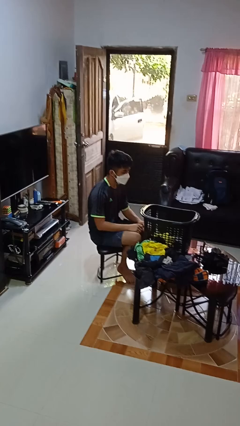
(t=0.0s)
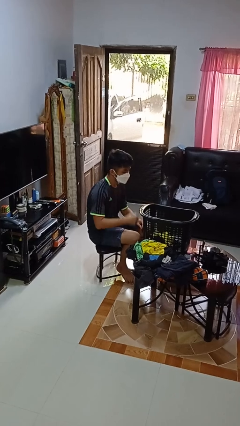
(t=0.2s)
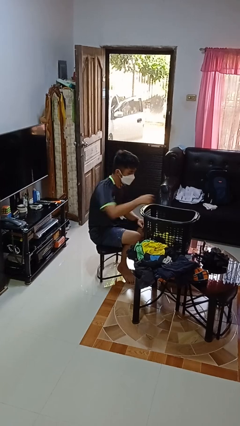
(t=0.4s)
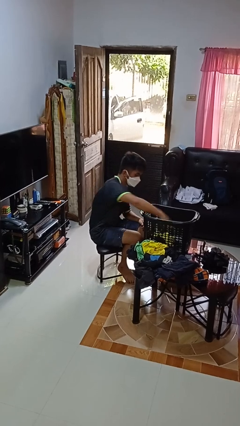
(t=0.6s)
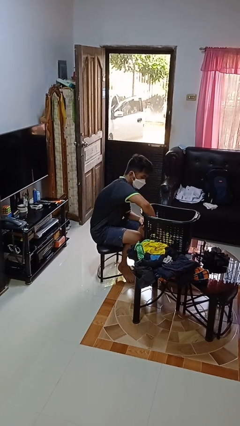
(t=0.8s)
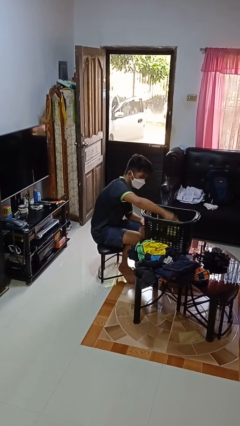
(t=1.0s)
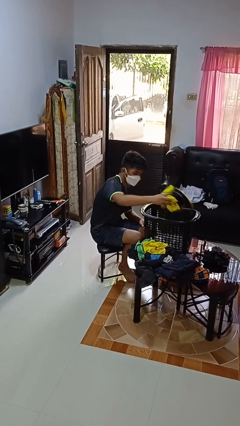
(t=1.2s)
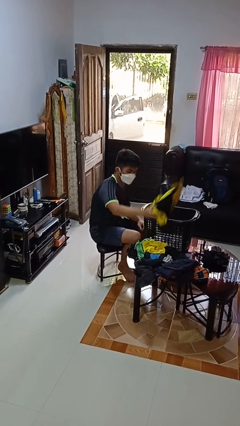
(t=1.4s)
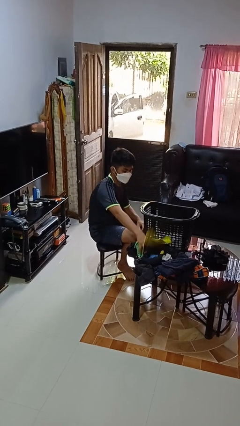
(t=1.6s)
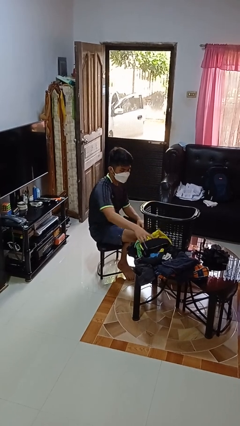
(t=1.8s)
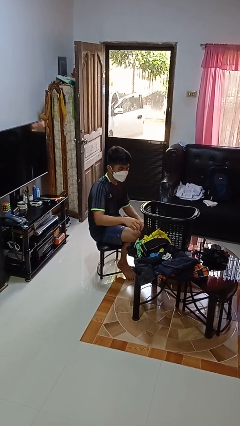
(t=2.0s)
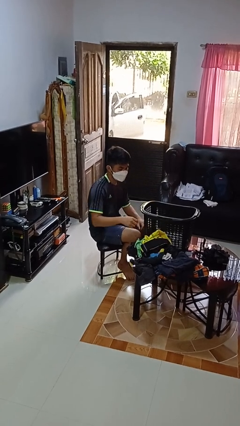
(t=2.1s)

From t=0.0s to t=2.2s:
person takes object from basket

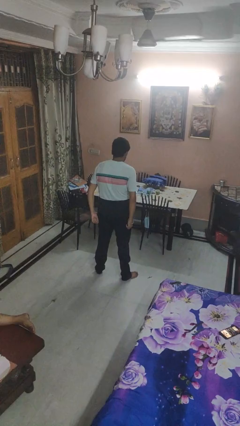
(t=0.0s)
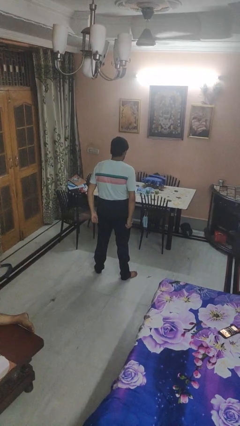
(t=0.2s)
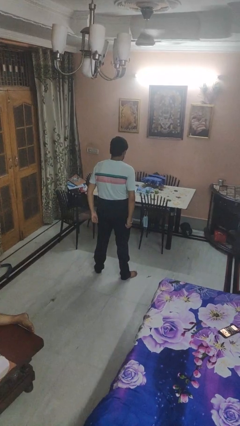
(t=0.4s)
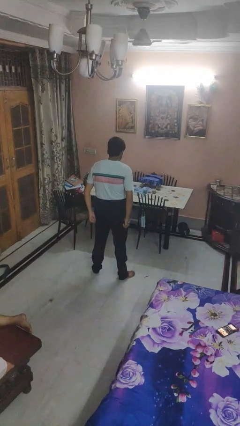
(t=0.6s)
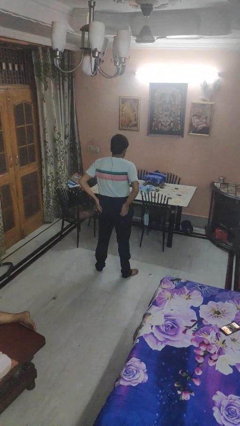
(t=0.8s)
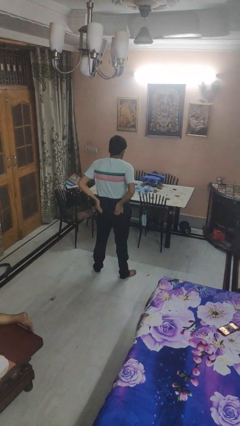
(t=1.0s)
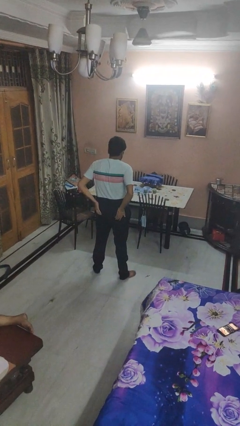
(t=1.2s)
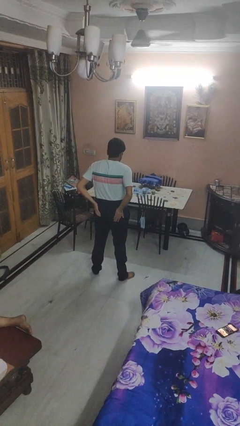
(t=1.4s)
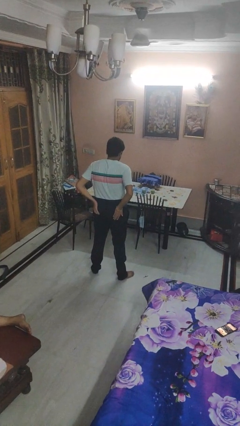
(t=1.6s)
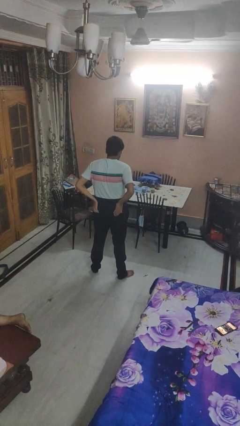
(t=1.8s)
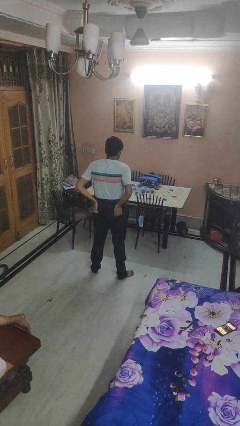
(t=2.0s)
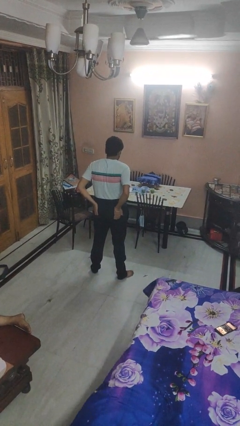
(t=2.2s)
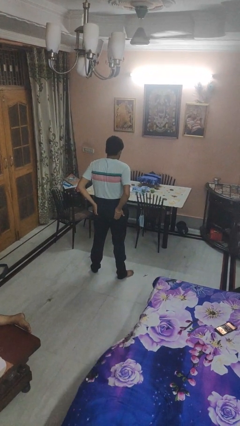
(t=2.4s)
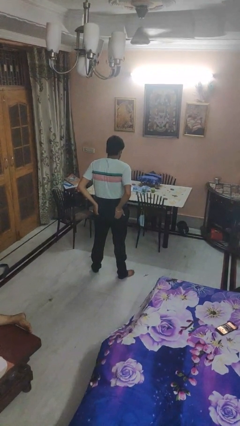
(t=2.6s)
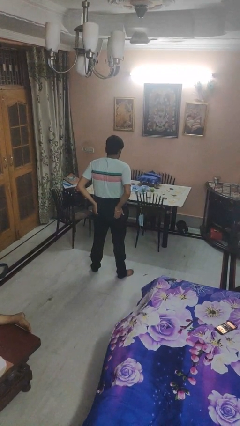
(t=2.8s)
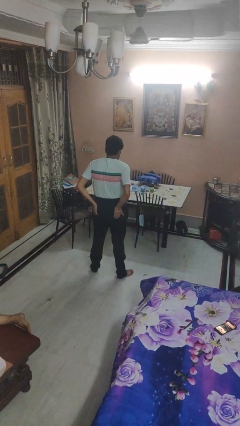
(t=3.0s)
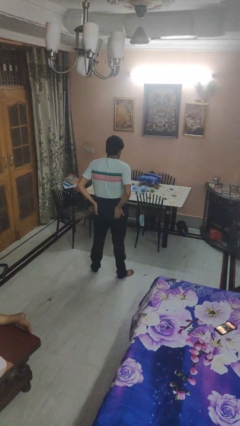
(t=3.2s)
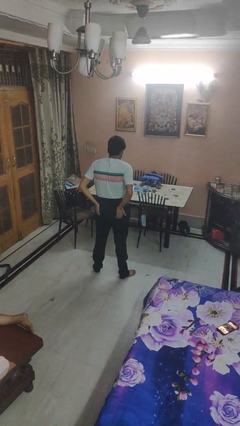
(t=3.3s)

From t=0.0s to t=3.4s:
person puts hands in back pockets

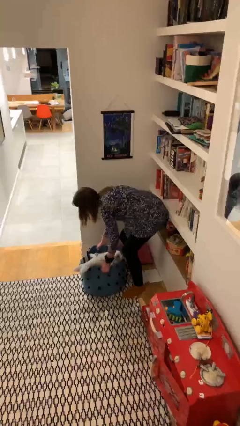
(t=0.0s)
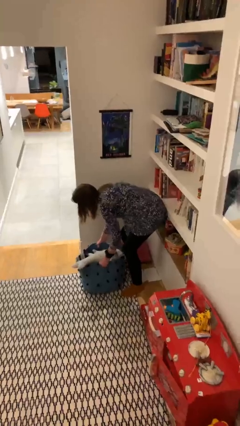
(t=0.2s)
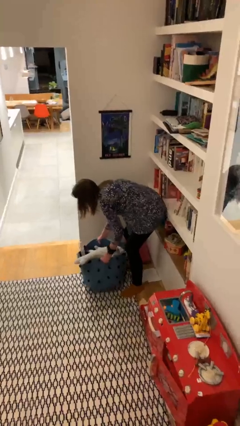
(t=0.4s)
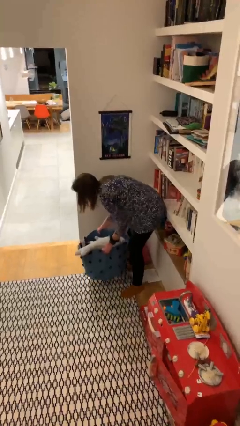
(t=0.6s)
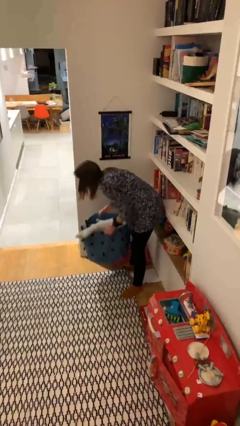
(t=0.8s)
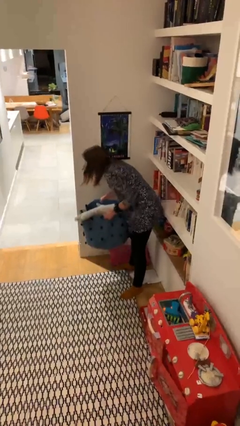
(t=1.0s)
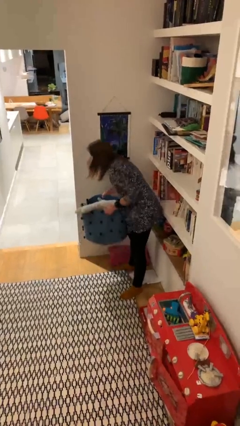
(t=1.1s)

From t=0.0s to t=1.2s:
person picks up object from floor

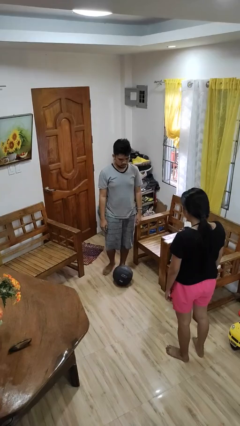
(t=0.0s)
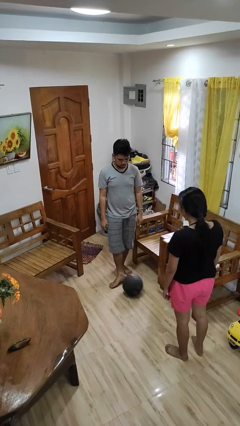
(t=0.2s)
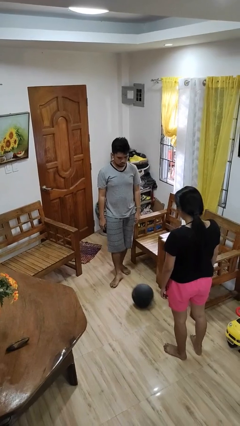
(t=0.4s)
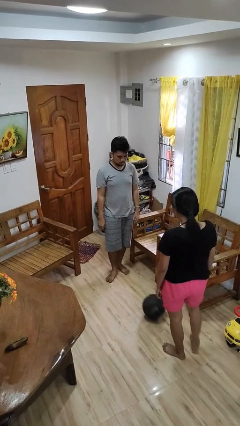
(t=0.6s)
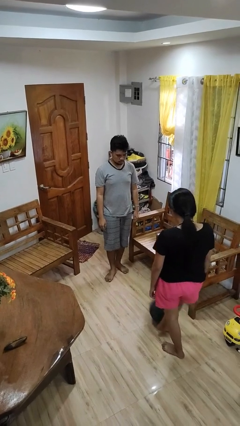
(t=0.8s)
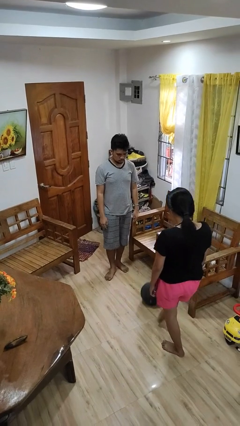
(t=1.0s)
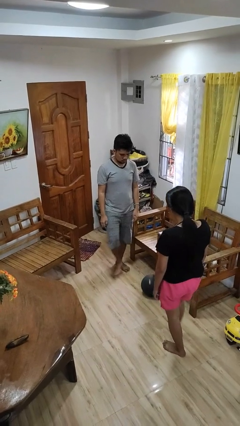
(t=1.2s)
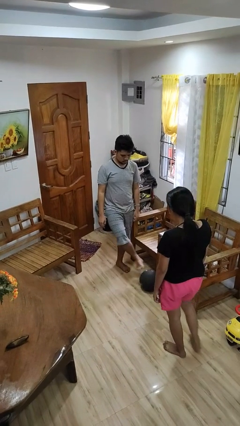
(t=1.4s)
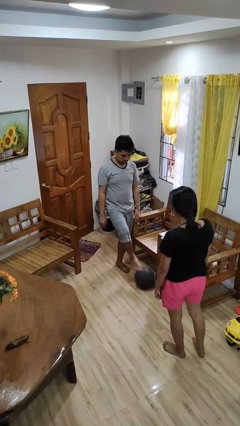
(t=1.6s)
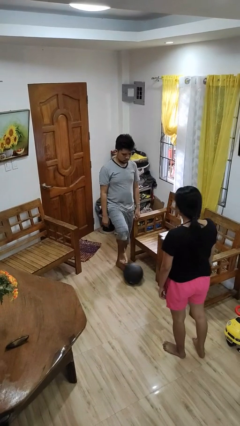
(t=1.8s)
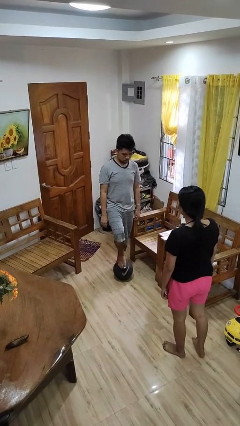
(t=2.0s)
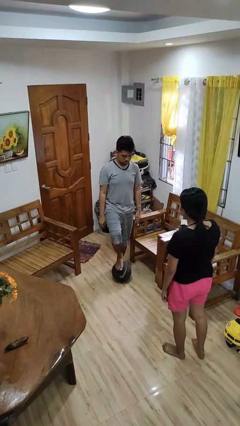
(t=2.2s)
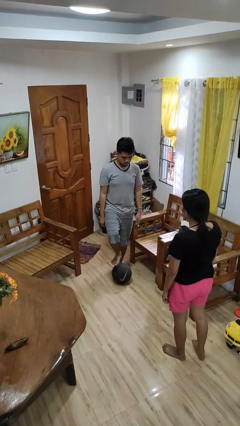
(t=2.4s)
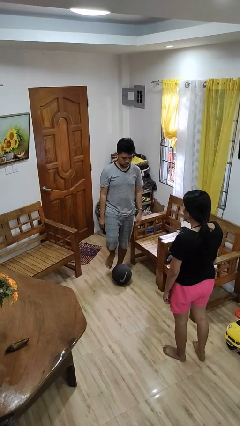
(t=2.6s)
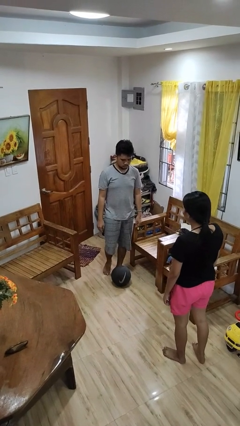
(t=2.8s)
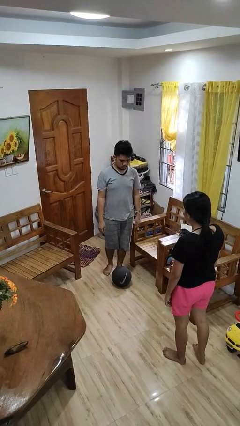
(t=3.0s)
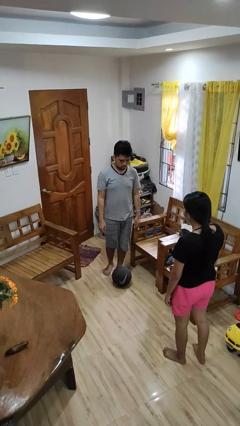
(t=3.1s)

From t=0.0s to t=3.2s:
person kicks object to person

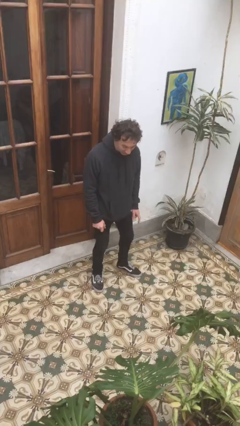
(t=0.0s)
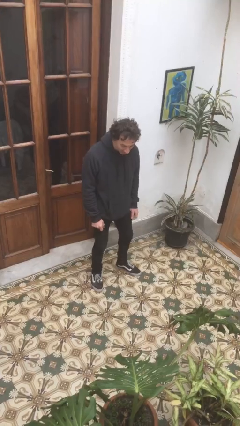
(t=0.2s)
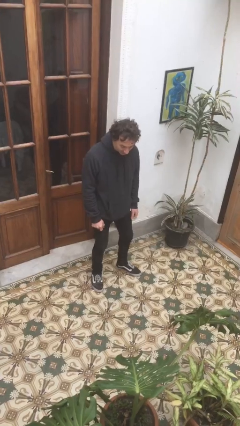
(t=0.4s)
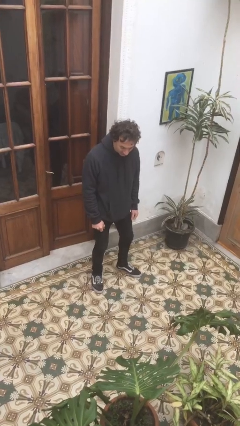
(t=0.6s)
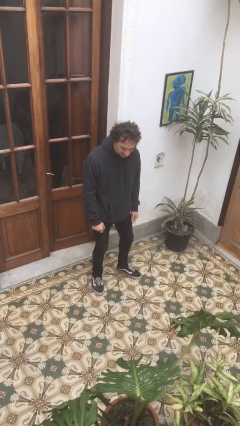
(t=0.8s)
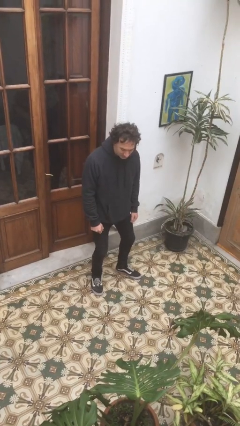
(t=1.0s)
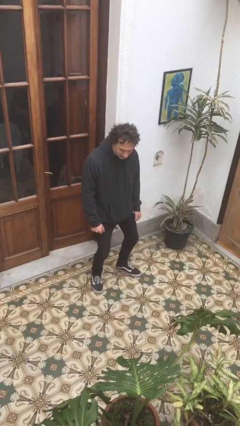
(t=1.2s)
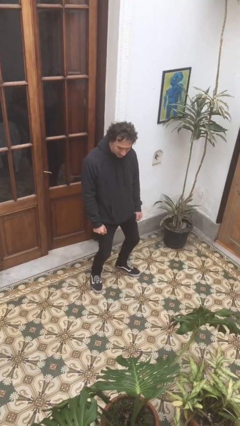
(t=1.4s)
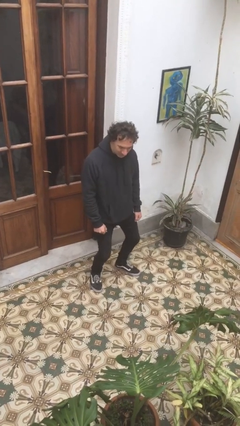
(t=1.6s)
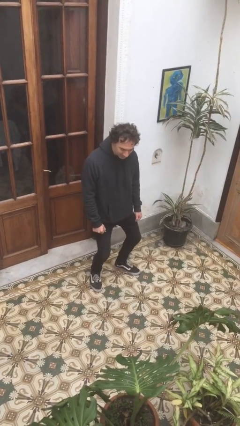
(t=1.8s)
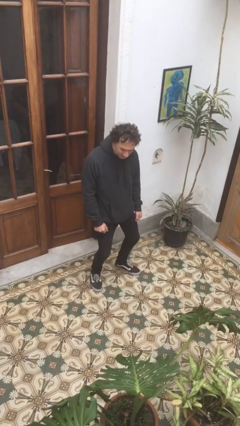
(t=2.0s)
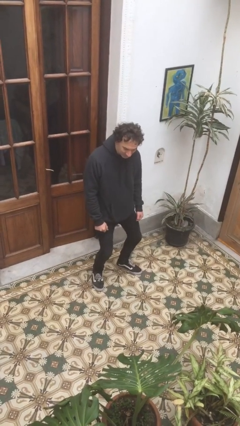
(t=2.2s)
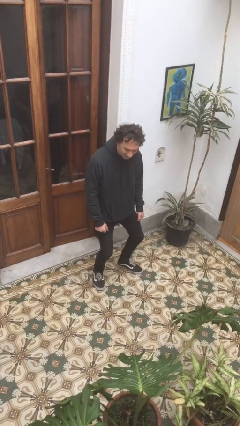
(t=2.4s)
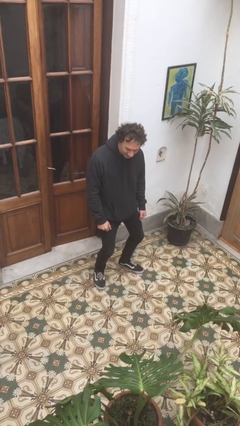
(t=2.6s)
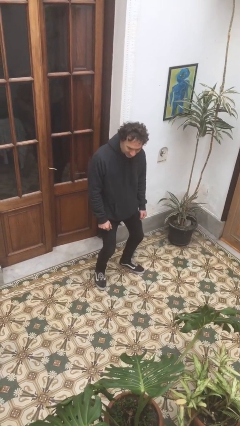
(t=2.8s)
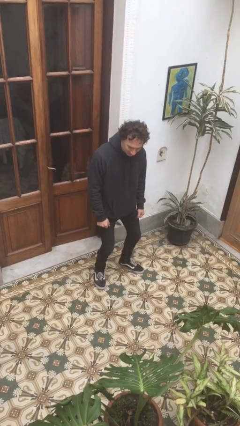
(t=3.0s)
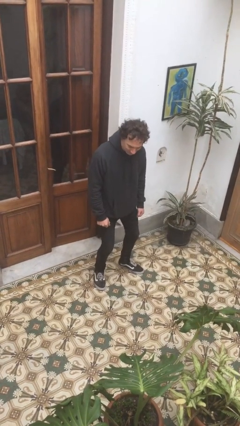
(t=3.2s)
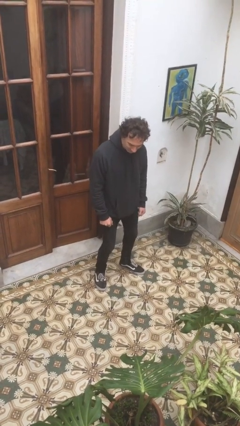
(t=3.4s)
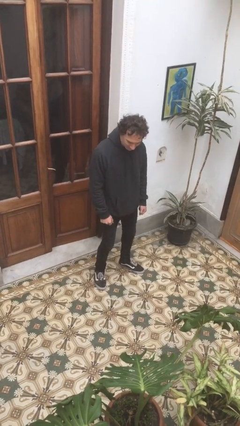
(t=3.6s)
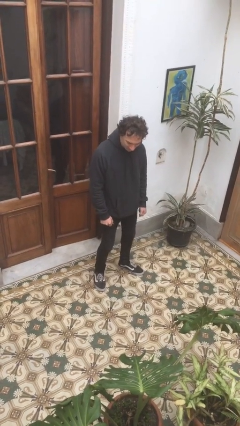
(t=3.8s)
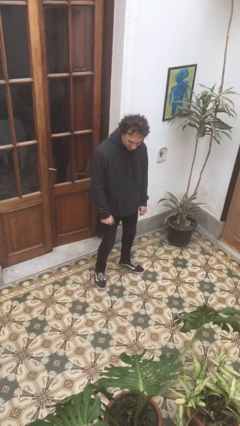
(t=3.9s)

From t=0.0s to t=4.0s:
person wiggles hips

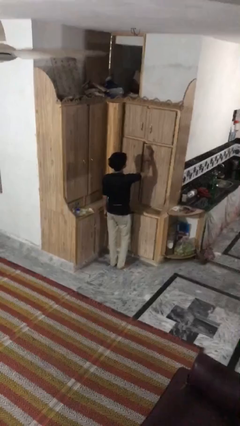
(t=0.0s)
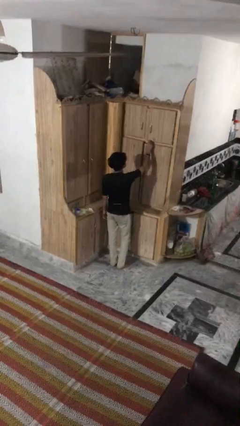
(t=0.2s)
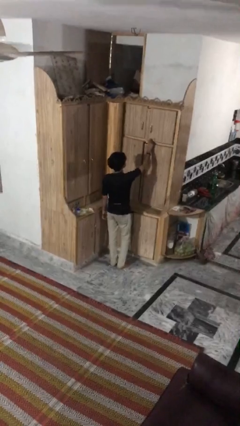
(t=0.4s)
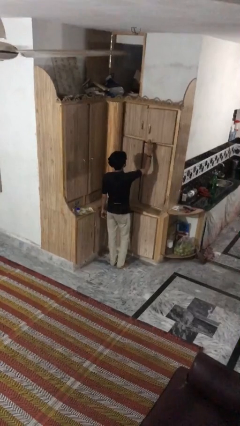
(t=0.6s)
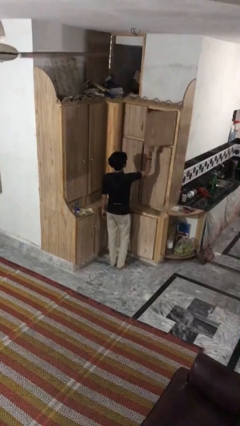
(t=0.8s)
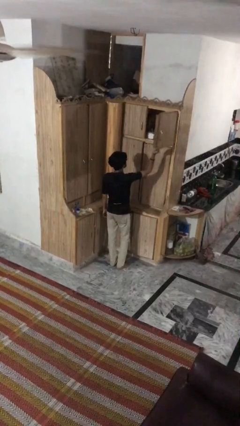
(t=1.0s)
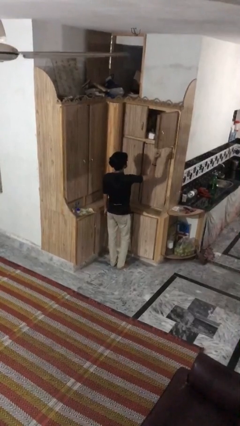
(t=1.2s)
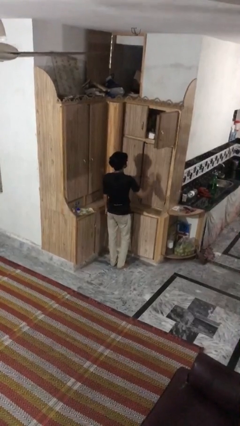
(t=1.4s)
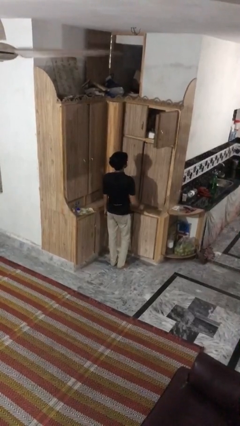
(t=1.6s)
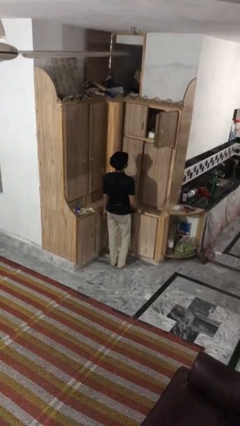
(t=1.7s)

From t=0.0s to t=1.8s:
person opens cabinet

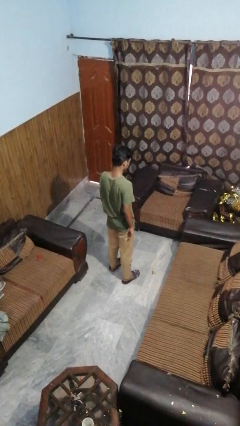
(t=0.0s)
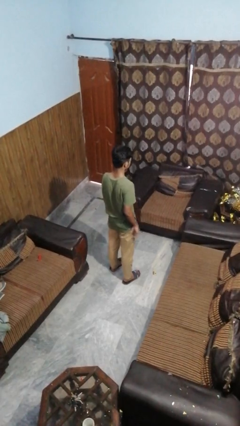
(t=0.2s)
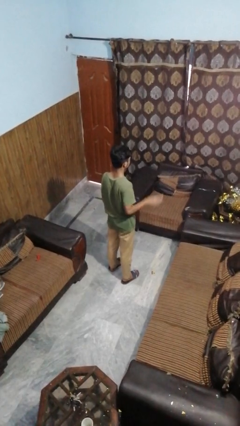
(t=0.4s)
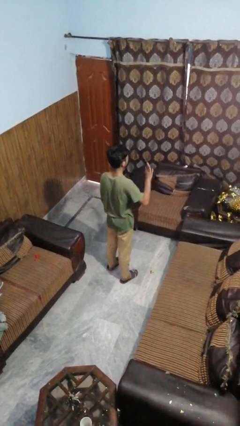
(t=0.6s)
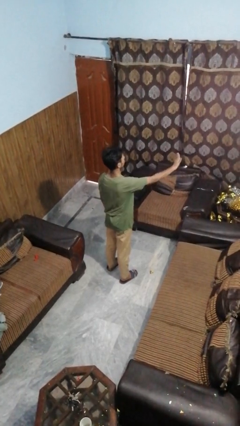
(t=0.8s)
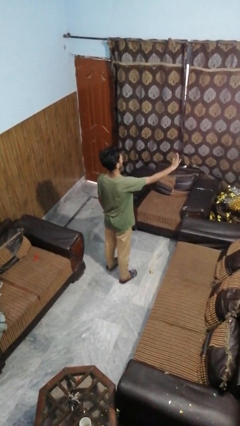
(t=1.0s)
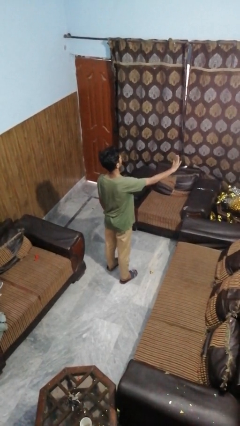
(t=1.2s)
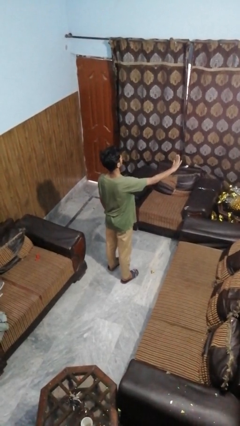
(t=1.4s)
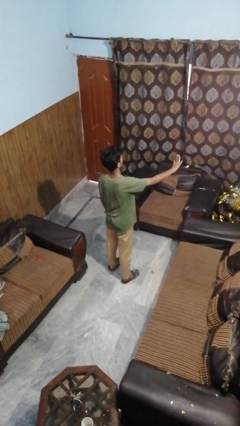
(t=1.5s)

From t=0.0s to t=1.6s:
person gestures stop
